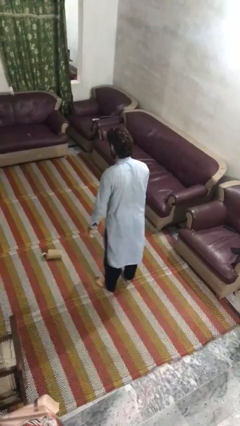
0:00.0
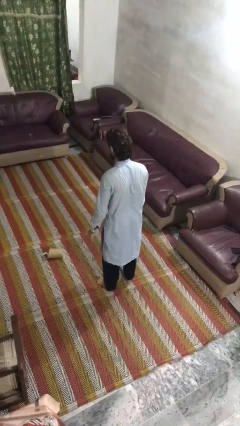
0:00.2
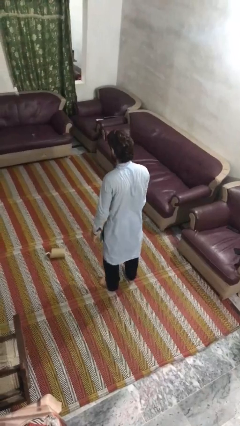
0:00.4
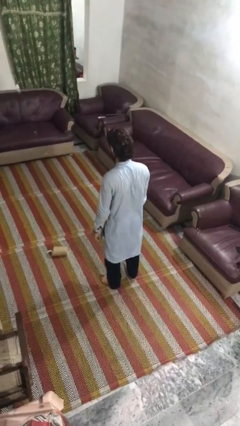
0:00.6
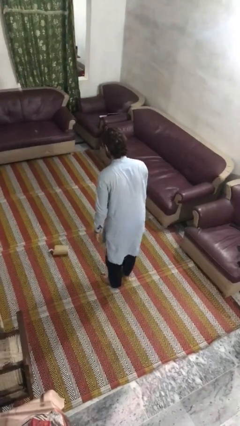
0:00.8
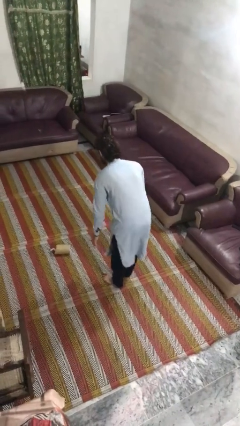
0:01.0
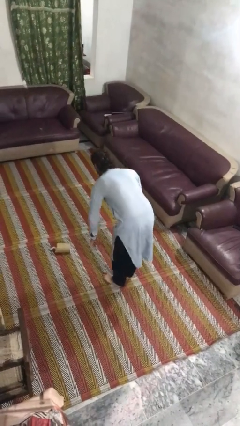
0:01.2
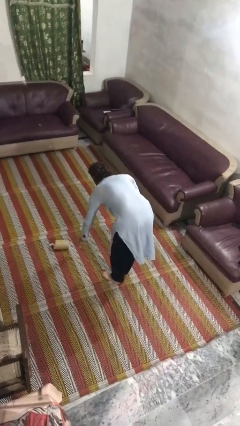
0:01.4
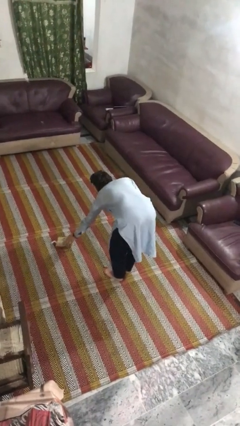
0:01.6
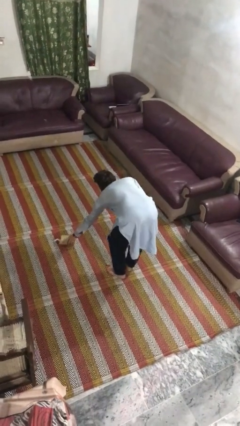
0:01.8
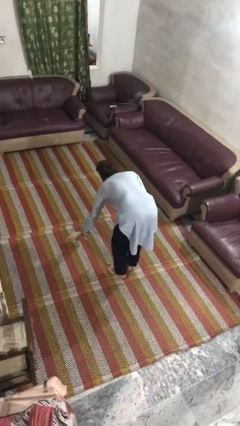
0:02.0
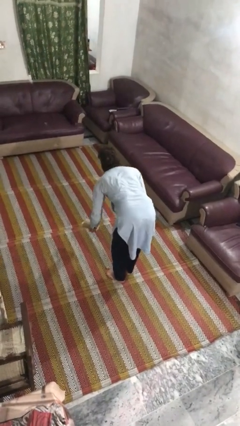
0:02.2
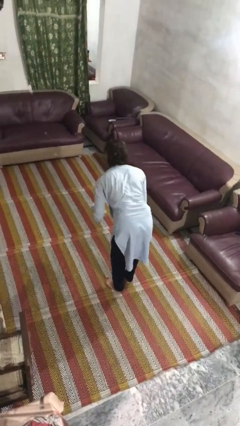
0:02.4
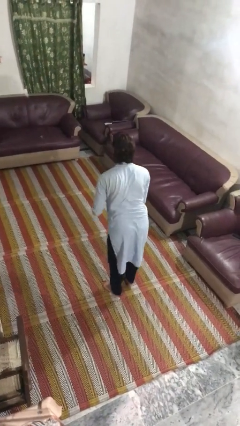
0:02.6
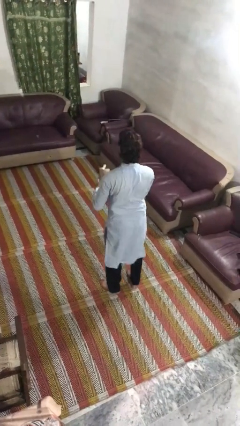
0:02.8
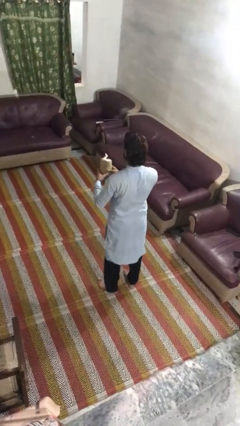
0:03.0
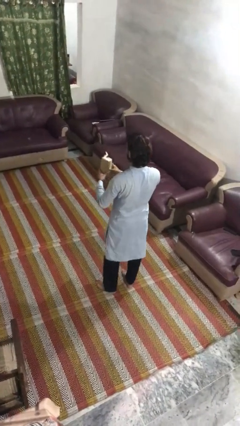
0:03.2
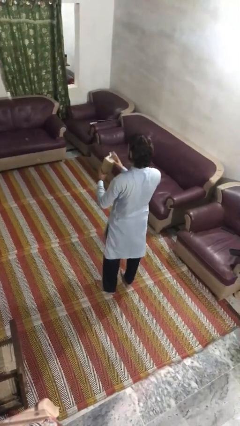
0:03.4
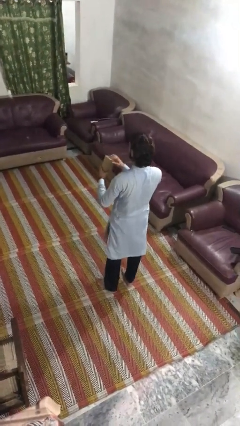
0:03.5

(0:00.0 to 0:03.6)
person picks up object from floor

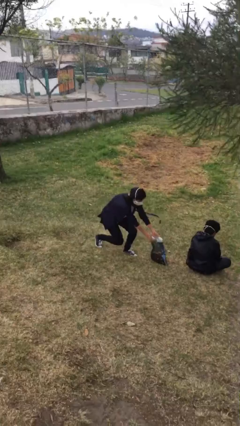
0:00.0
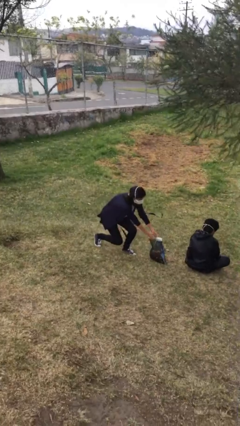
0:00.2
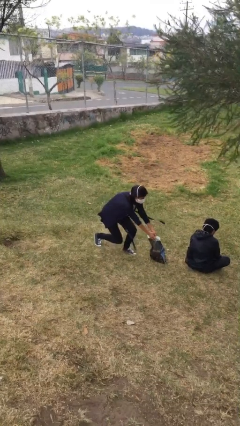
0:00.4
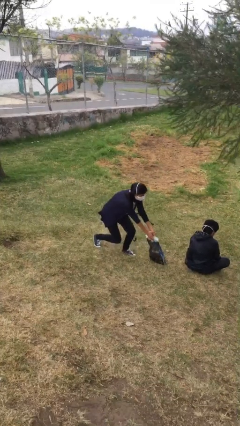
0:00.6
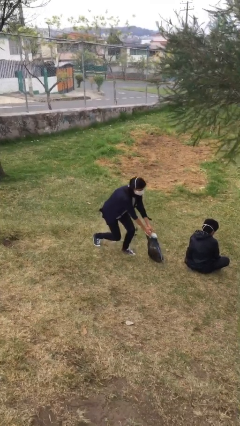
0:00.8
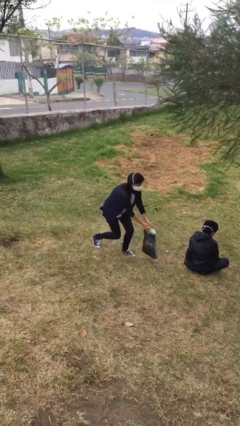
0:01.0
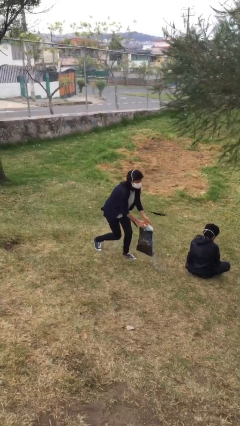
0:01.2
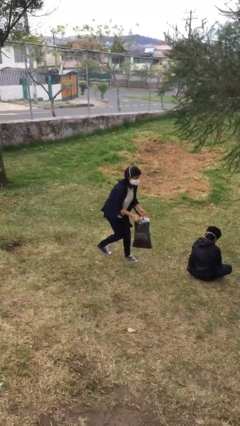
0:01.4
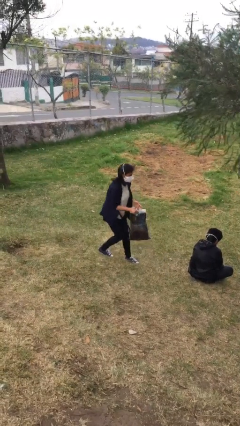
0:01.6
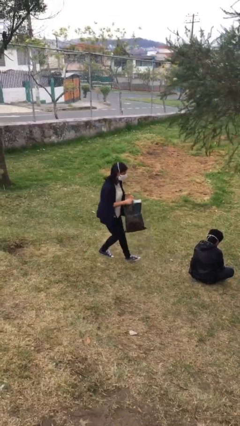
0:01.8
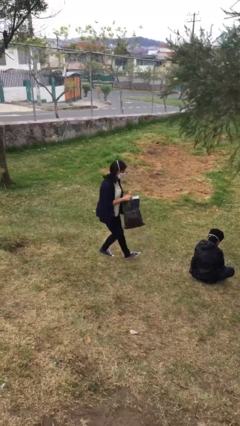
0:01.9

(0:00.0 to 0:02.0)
person steals object from person

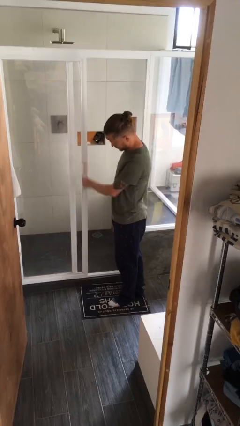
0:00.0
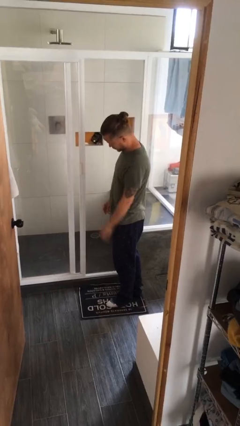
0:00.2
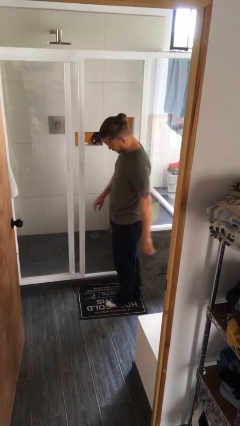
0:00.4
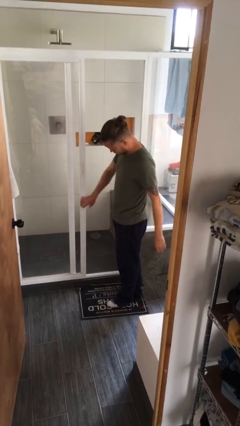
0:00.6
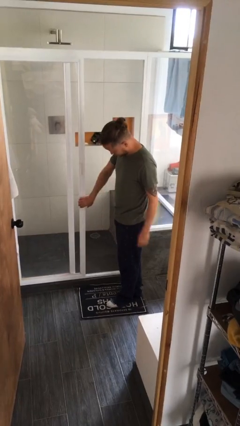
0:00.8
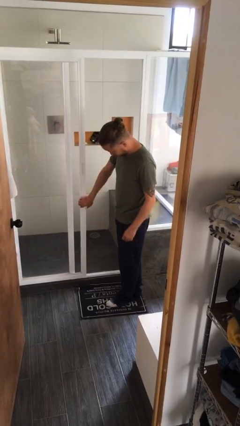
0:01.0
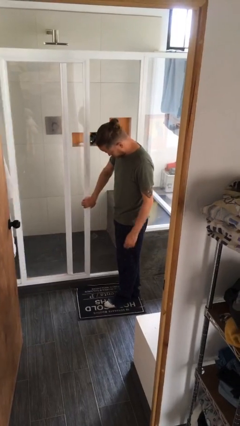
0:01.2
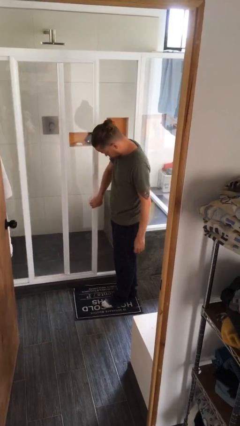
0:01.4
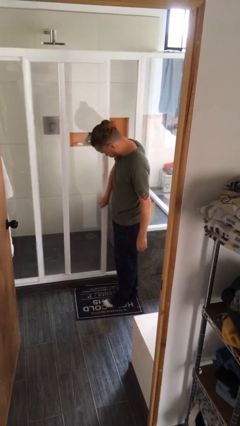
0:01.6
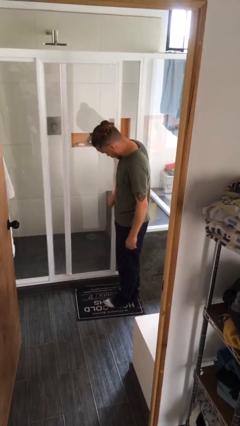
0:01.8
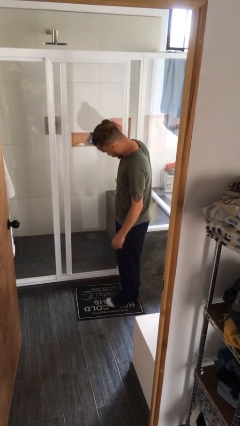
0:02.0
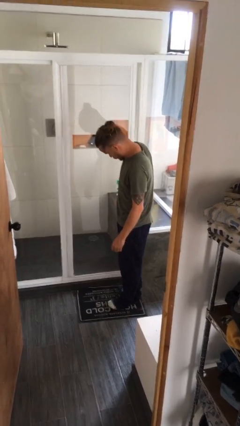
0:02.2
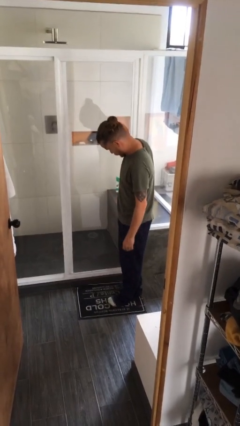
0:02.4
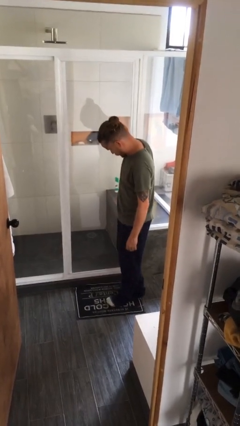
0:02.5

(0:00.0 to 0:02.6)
person closes sliding door

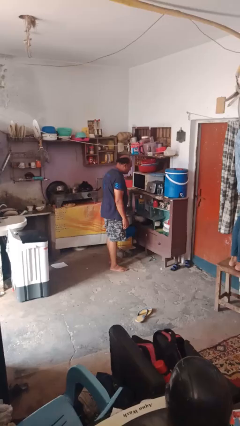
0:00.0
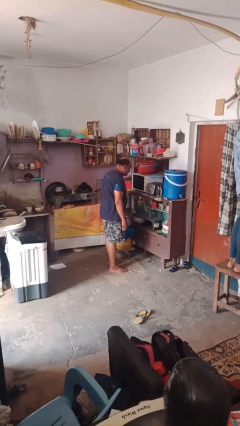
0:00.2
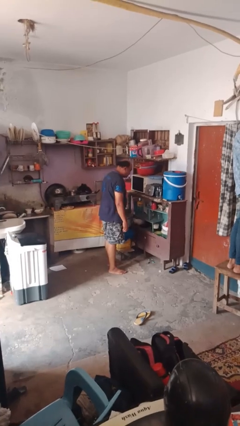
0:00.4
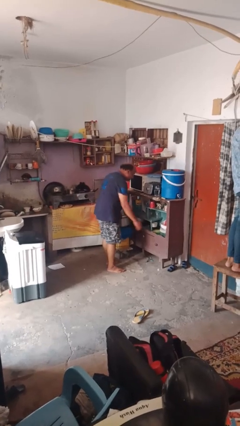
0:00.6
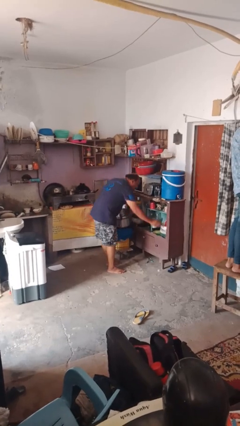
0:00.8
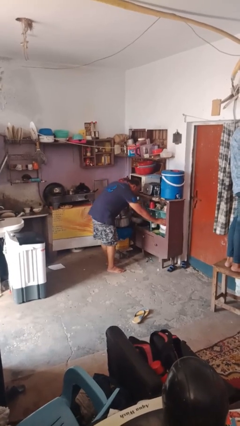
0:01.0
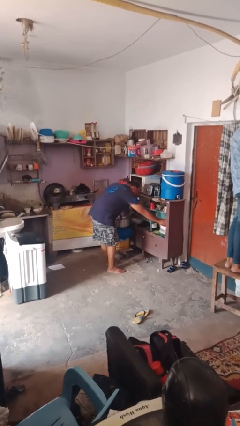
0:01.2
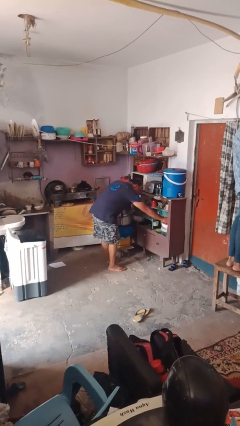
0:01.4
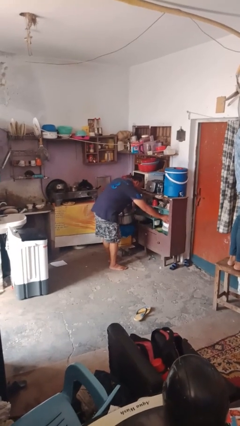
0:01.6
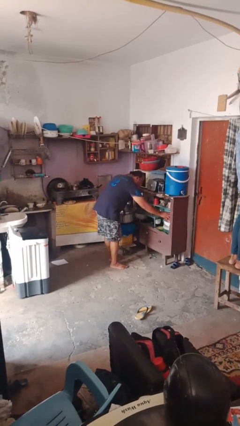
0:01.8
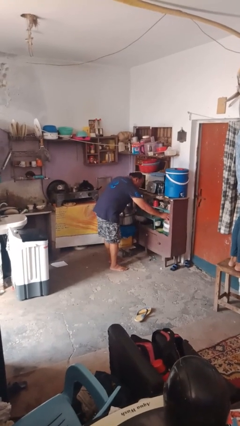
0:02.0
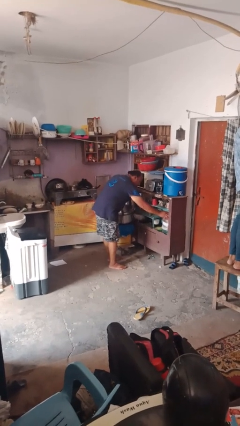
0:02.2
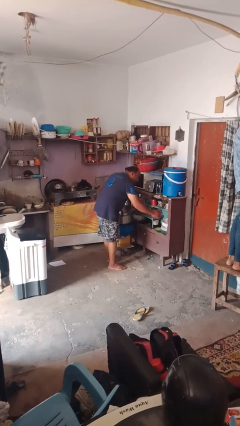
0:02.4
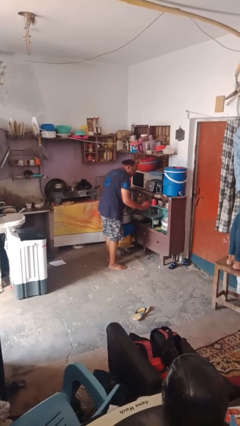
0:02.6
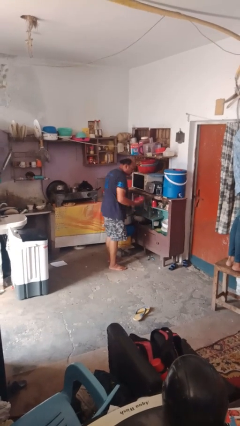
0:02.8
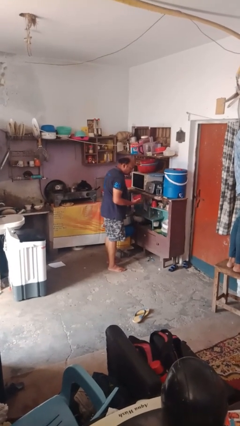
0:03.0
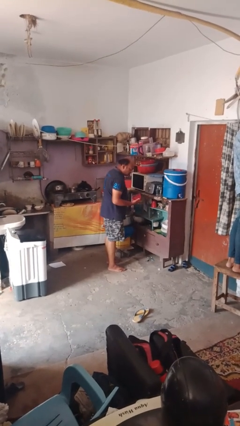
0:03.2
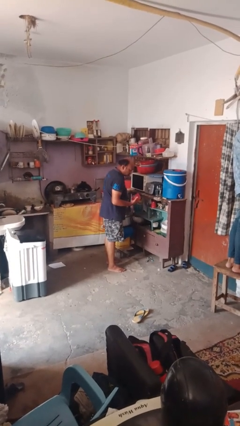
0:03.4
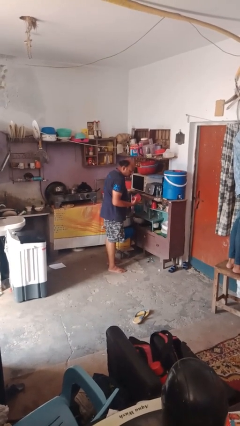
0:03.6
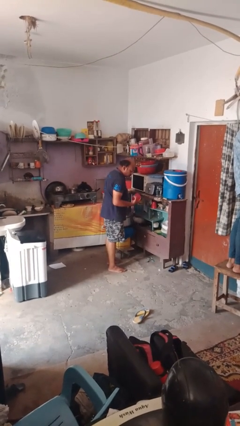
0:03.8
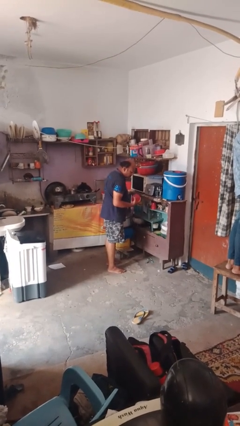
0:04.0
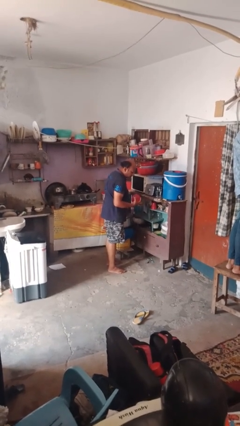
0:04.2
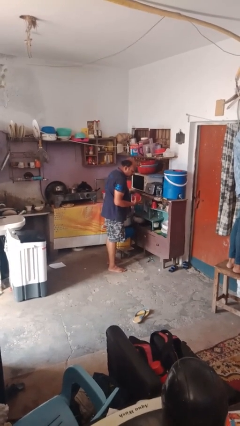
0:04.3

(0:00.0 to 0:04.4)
person takes object from kitchen drawer

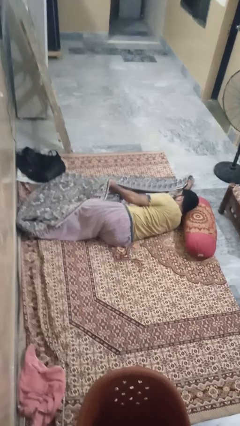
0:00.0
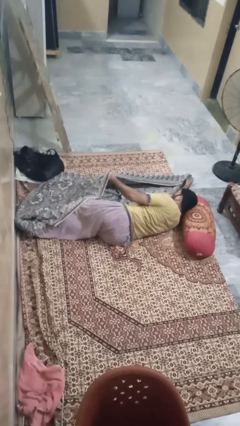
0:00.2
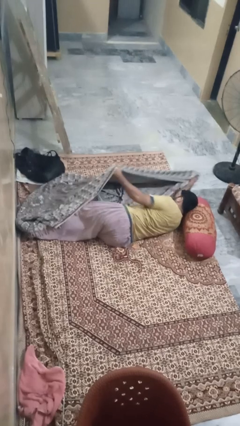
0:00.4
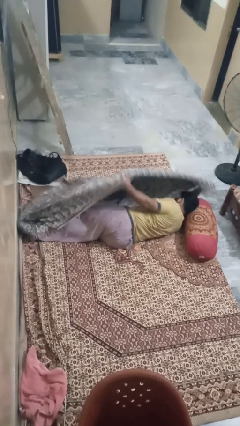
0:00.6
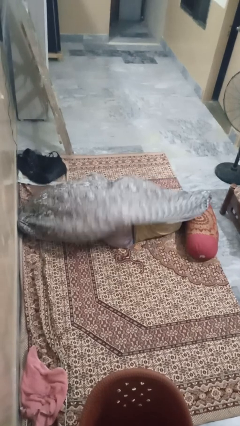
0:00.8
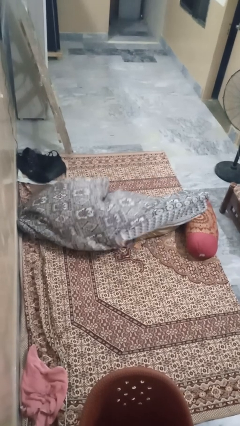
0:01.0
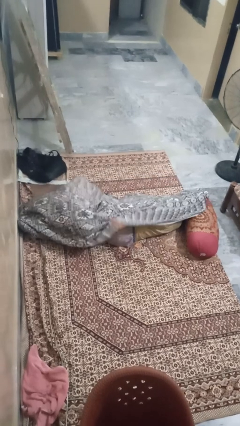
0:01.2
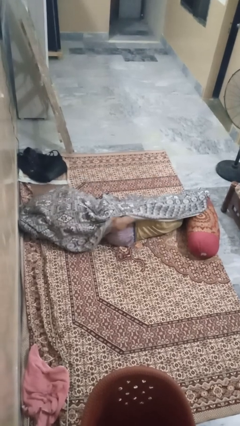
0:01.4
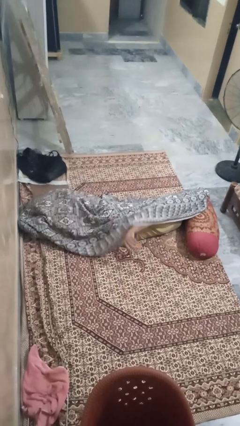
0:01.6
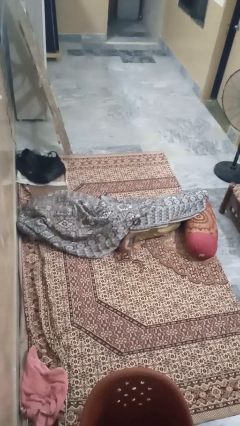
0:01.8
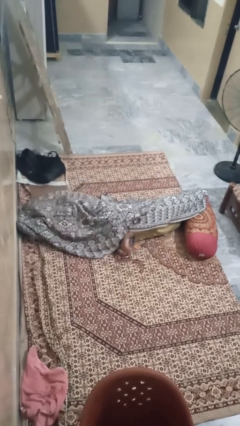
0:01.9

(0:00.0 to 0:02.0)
person covers with blanket

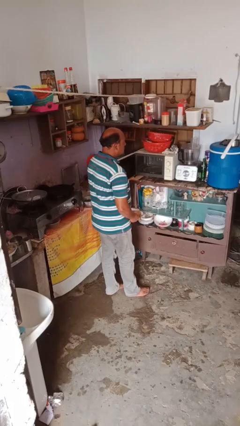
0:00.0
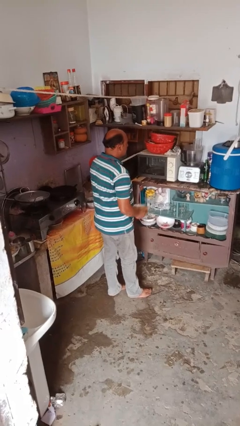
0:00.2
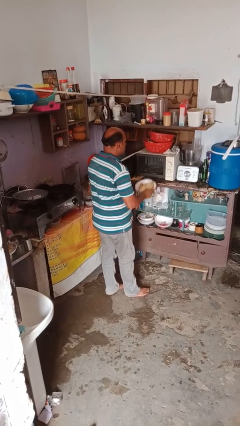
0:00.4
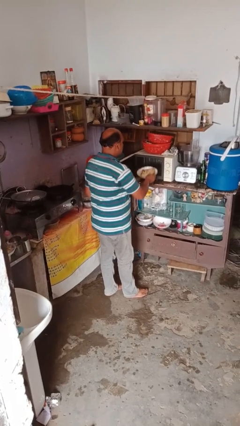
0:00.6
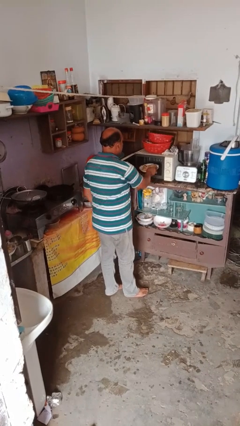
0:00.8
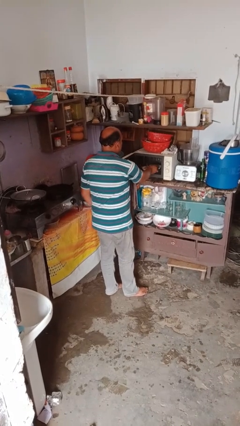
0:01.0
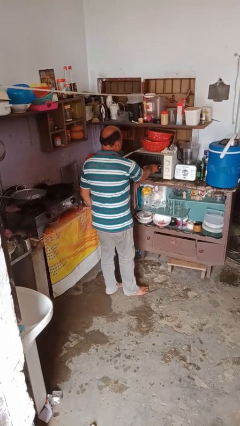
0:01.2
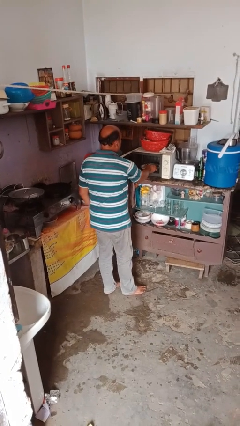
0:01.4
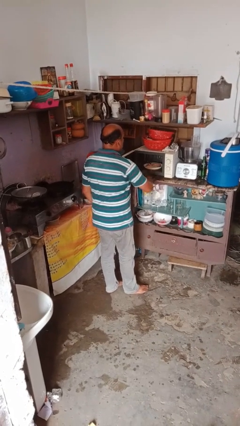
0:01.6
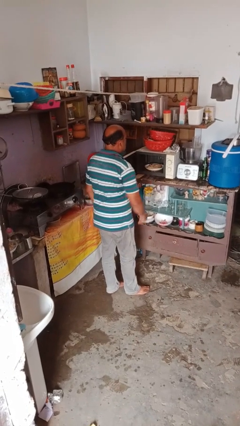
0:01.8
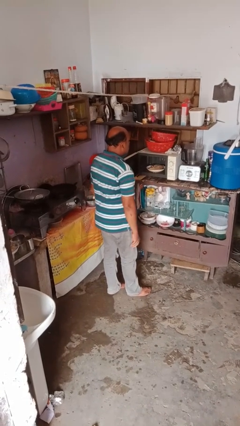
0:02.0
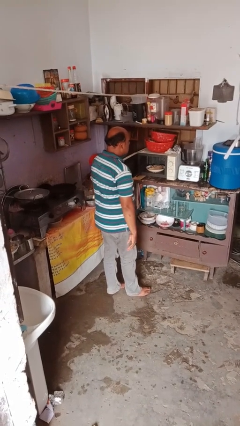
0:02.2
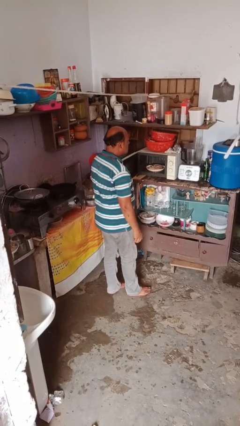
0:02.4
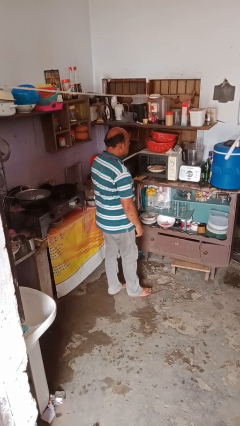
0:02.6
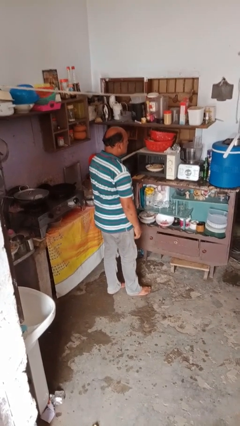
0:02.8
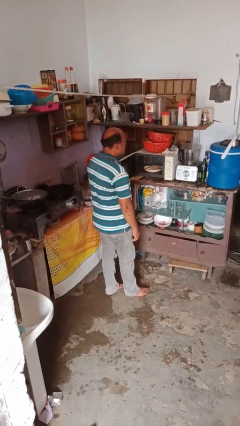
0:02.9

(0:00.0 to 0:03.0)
person puts object into microwave
